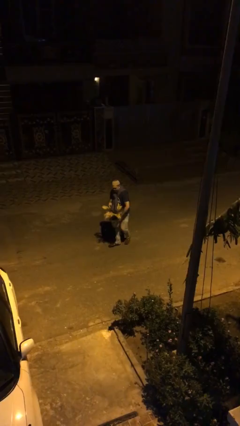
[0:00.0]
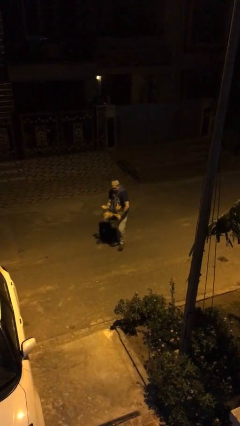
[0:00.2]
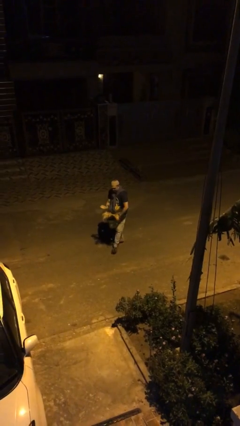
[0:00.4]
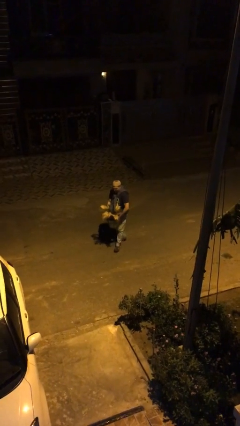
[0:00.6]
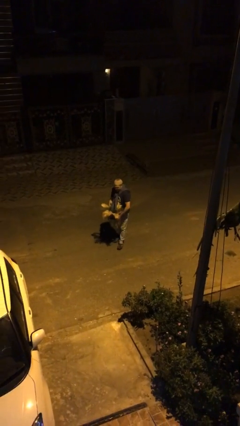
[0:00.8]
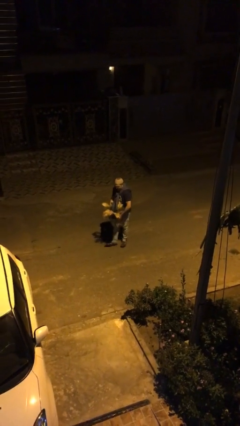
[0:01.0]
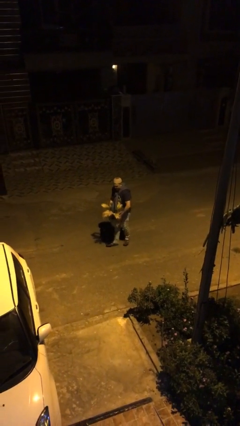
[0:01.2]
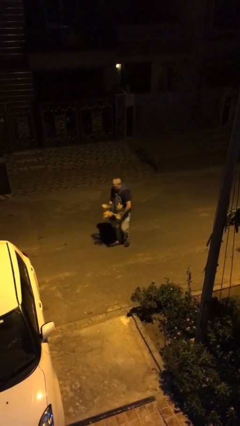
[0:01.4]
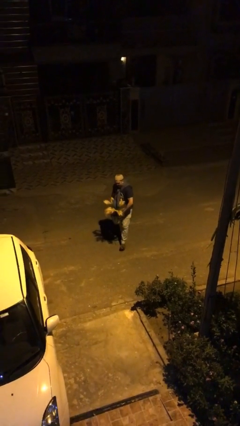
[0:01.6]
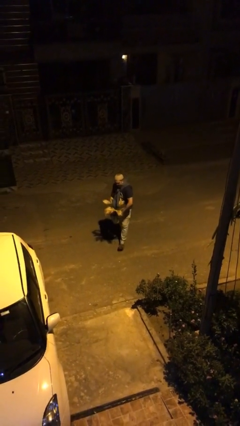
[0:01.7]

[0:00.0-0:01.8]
person carries heavy object

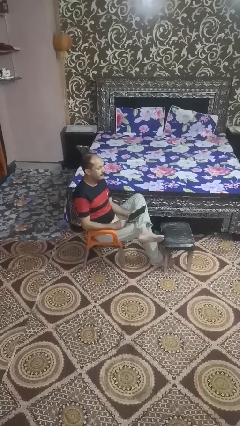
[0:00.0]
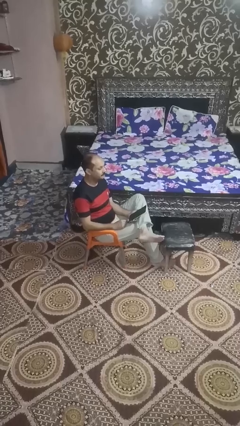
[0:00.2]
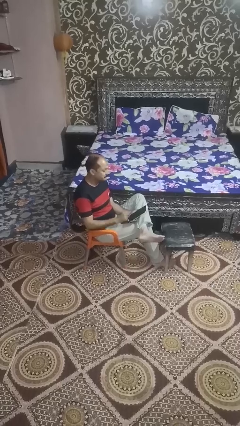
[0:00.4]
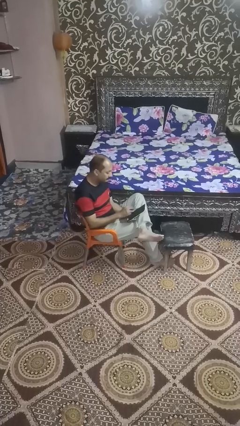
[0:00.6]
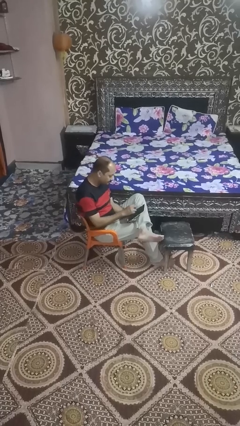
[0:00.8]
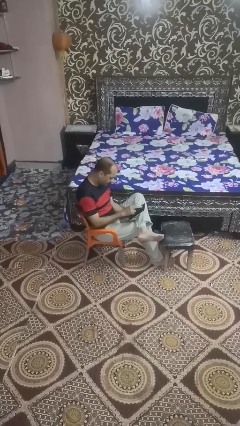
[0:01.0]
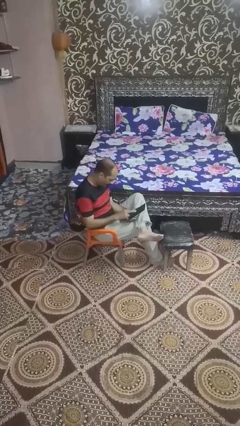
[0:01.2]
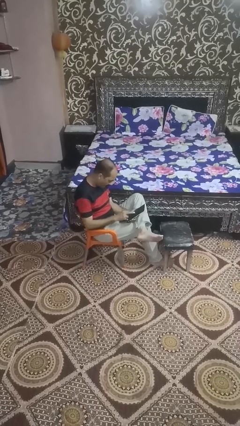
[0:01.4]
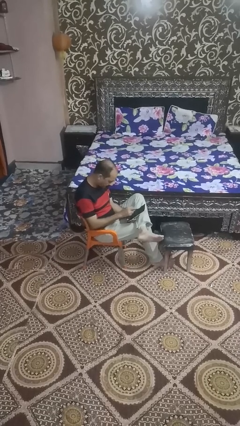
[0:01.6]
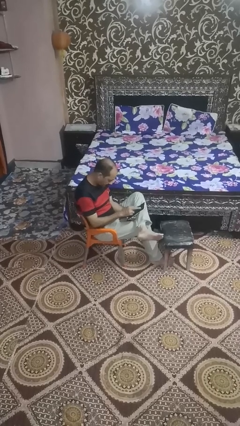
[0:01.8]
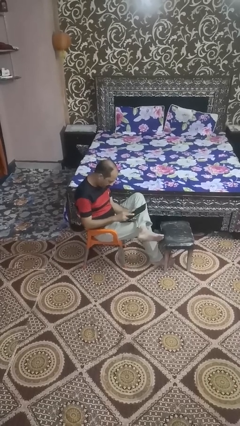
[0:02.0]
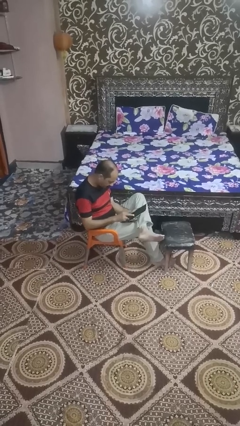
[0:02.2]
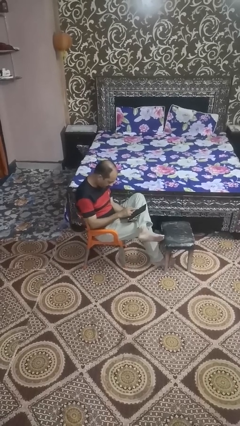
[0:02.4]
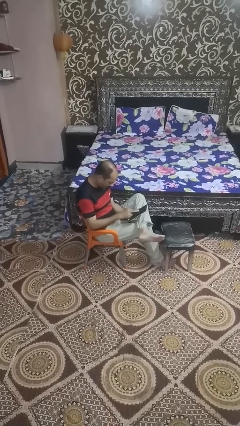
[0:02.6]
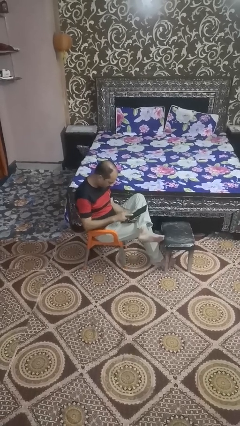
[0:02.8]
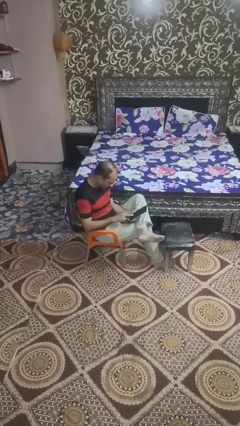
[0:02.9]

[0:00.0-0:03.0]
person interacts with tablet

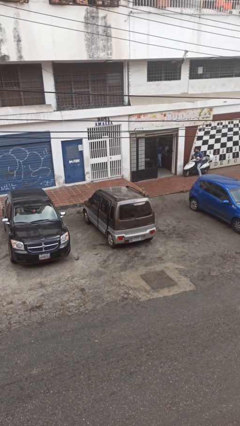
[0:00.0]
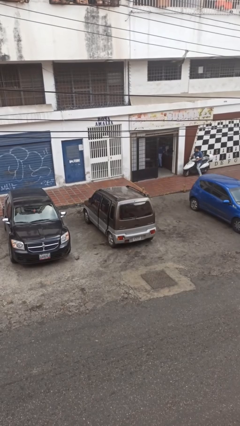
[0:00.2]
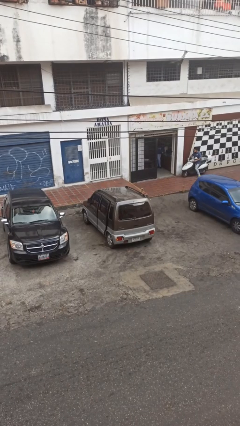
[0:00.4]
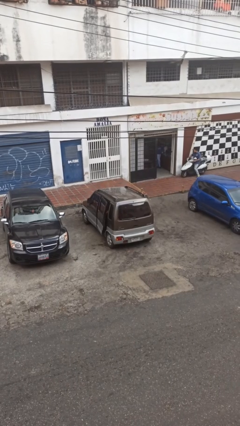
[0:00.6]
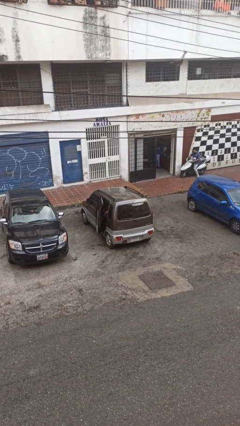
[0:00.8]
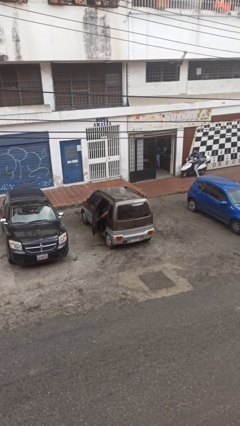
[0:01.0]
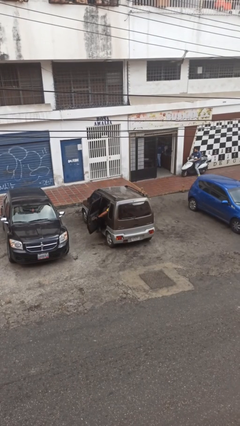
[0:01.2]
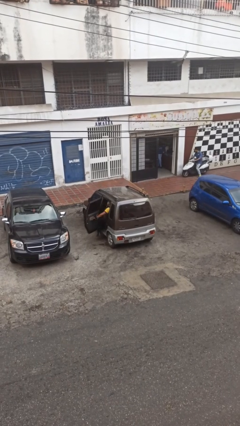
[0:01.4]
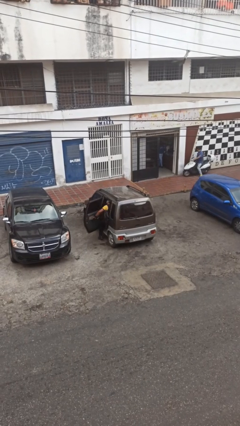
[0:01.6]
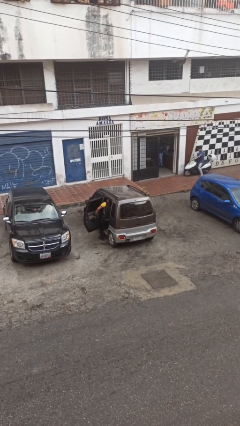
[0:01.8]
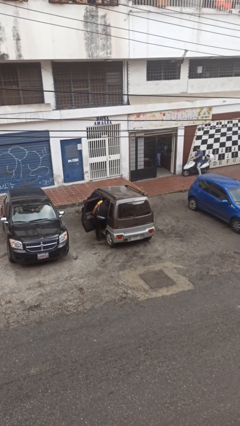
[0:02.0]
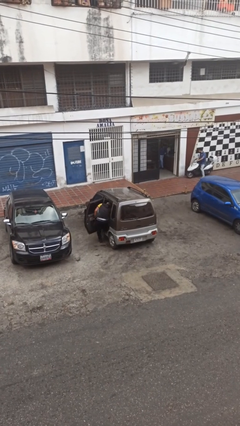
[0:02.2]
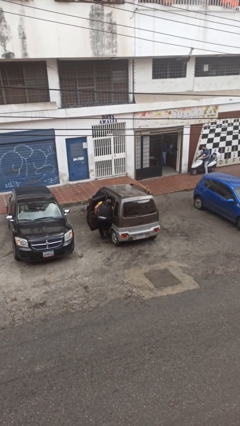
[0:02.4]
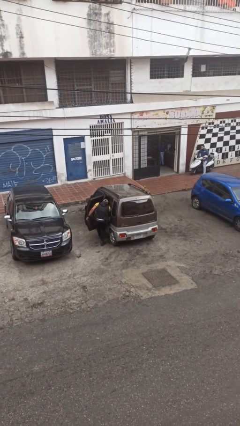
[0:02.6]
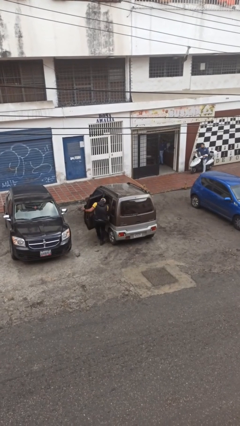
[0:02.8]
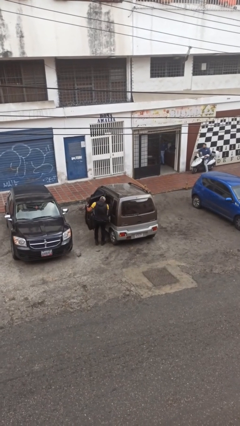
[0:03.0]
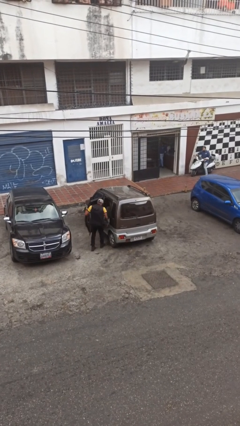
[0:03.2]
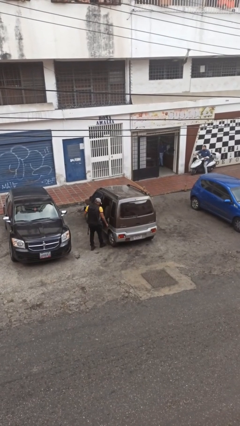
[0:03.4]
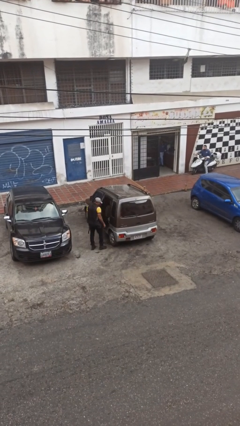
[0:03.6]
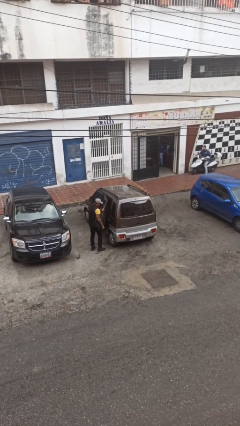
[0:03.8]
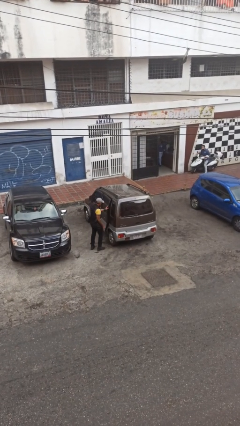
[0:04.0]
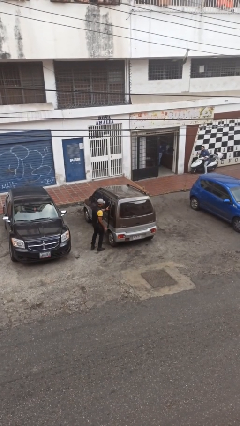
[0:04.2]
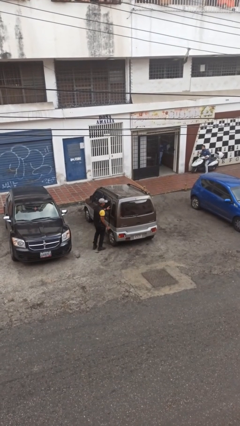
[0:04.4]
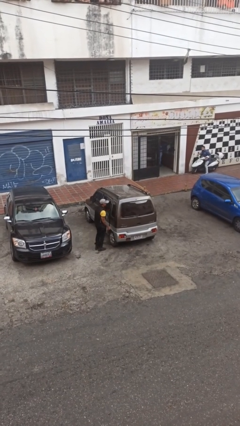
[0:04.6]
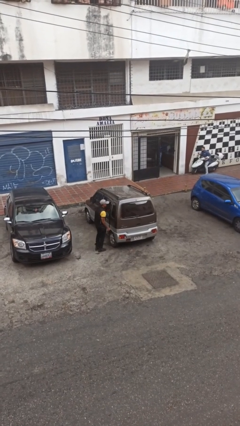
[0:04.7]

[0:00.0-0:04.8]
car drops off person

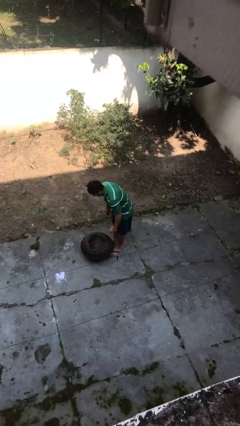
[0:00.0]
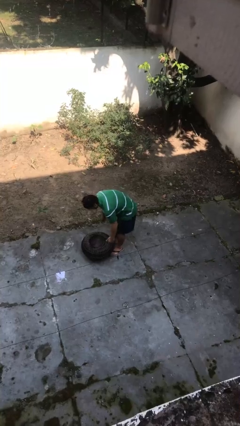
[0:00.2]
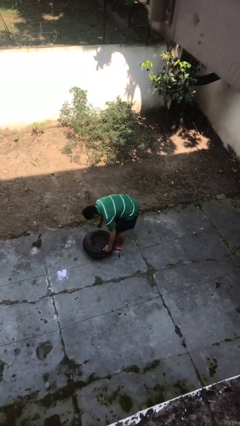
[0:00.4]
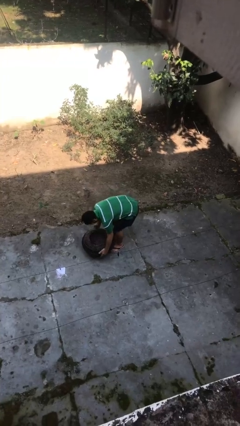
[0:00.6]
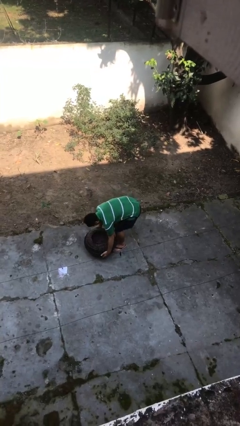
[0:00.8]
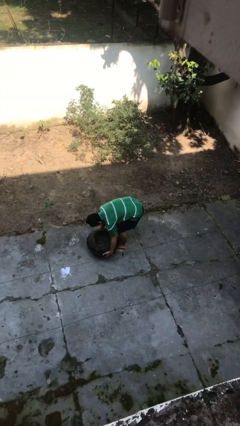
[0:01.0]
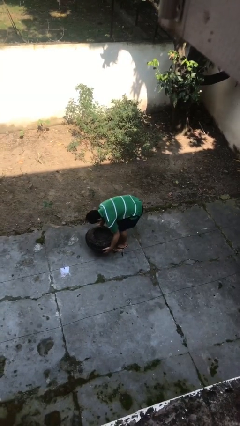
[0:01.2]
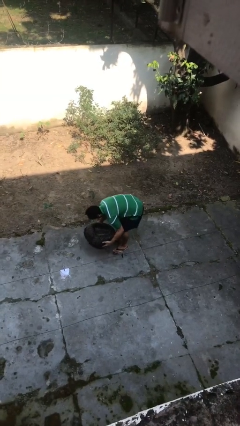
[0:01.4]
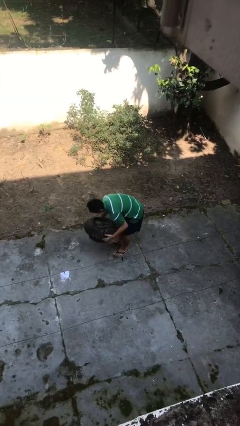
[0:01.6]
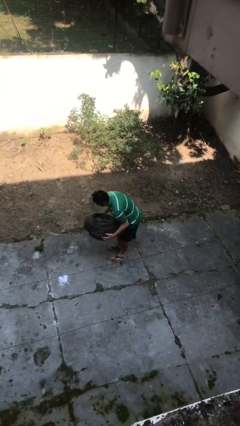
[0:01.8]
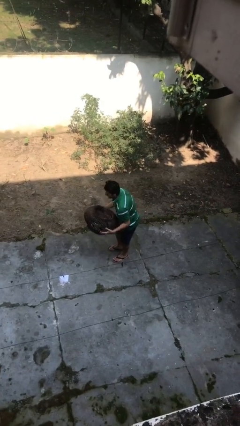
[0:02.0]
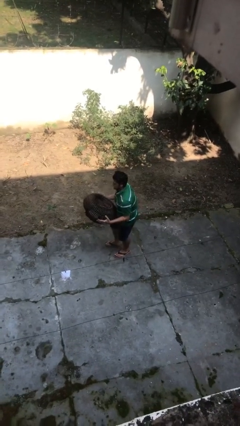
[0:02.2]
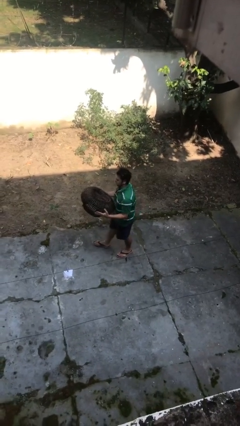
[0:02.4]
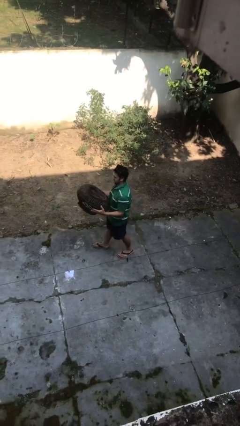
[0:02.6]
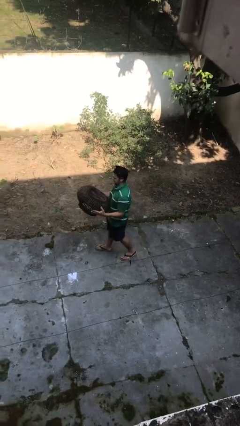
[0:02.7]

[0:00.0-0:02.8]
person picks up object from floor

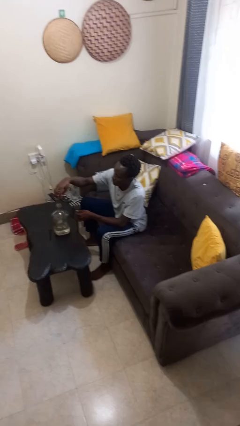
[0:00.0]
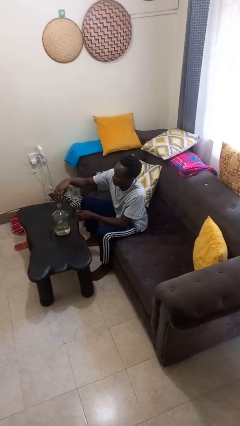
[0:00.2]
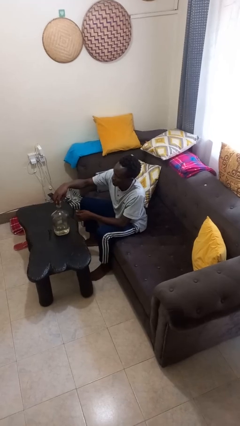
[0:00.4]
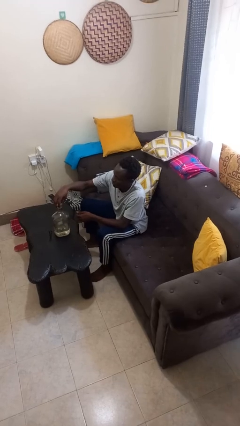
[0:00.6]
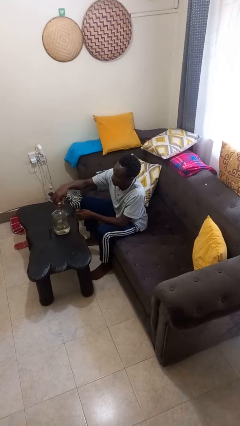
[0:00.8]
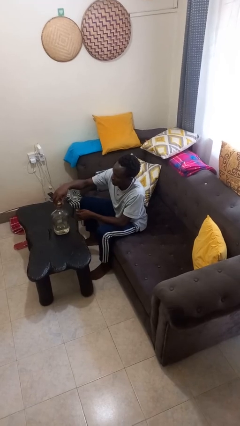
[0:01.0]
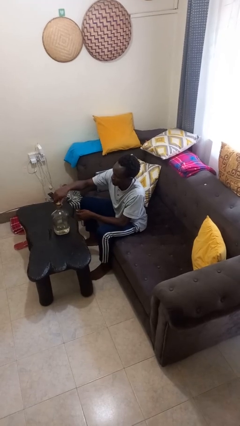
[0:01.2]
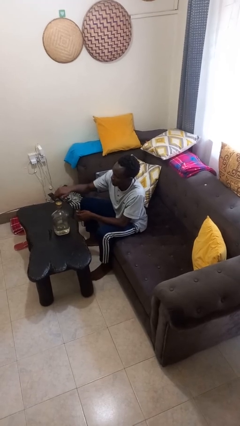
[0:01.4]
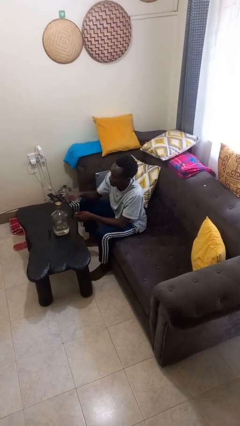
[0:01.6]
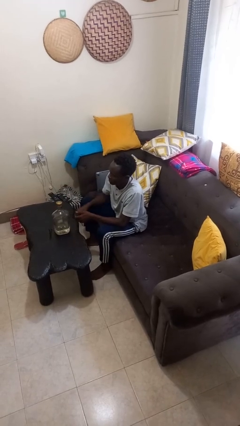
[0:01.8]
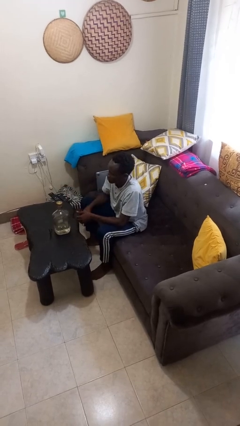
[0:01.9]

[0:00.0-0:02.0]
person screws lid to bottle

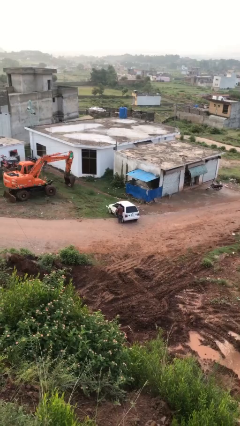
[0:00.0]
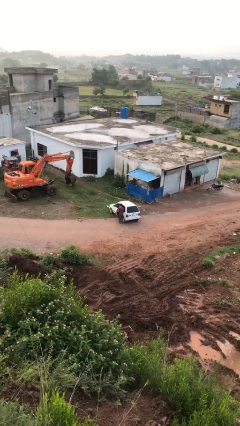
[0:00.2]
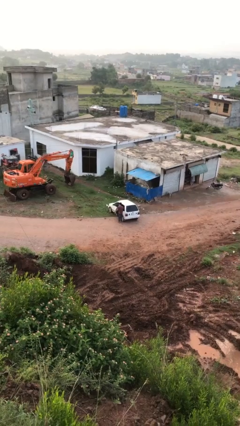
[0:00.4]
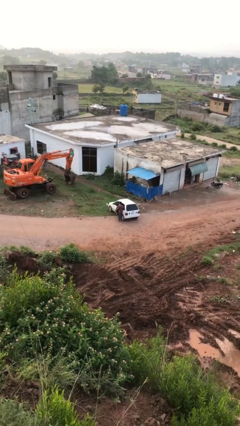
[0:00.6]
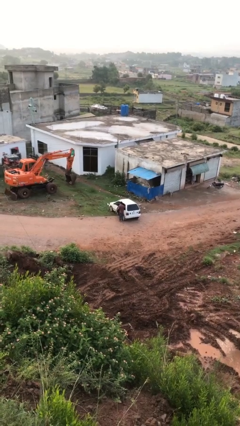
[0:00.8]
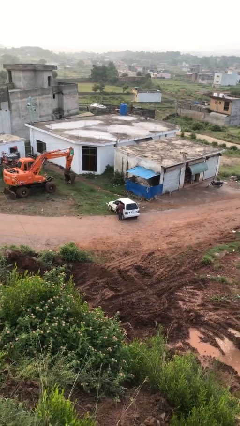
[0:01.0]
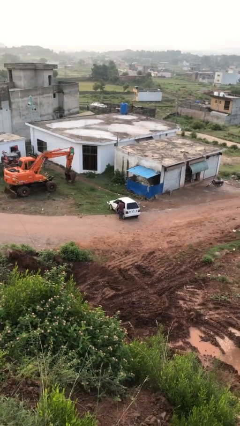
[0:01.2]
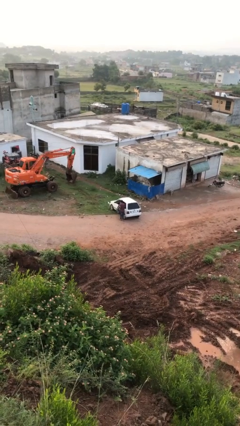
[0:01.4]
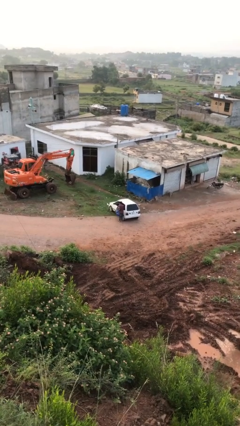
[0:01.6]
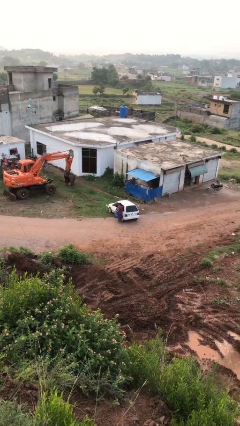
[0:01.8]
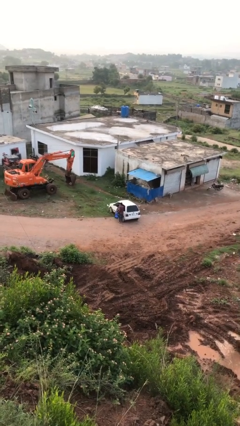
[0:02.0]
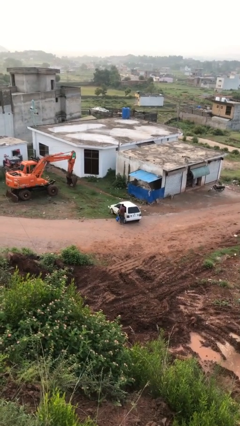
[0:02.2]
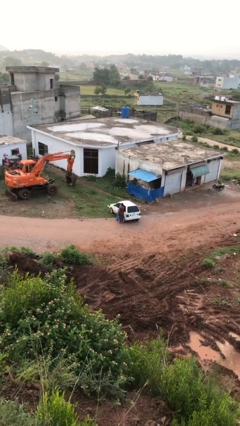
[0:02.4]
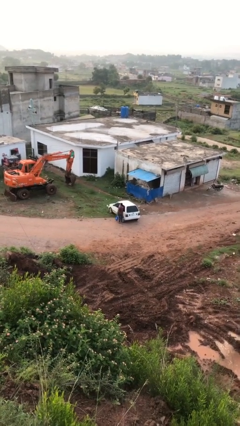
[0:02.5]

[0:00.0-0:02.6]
person unloads car
